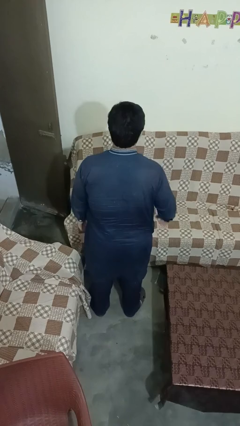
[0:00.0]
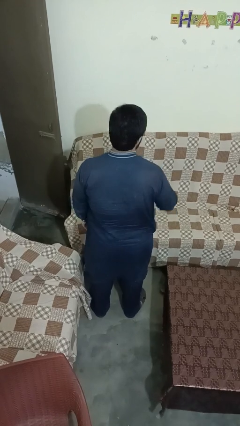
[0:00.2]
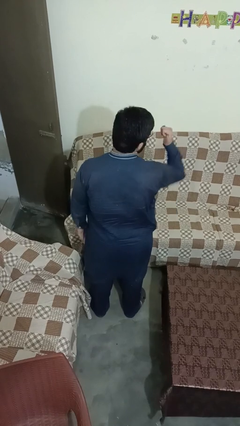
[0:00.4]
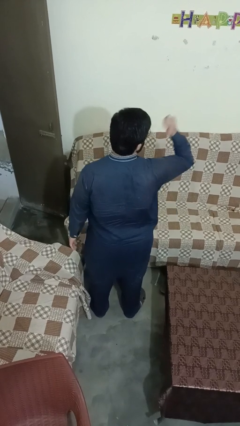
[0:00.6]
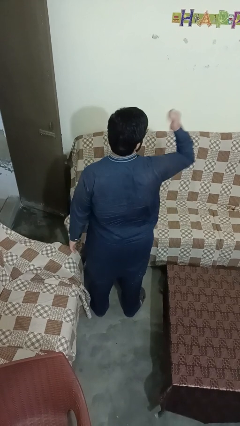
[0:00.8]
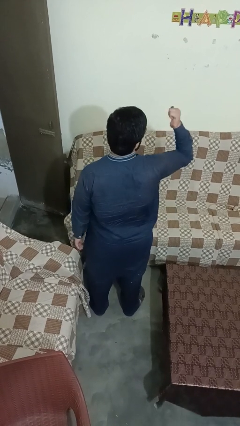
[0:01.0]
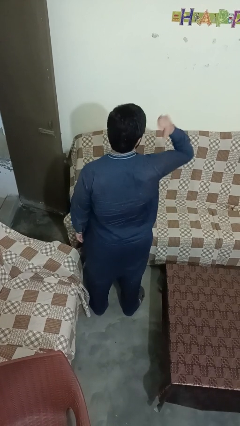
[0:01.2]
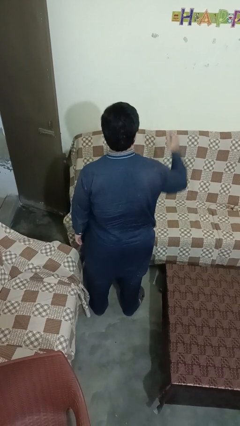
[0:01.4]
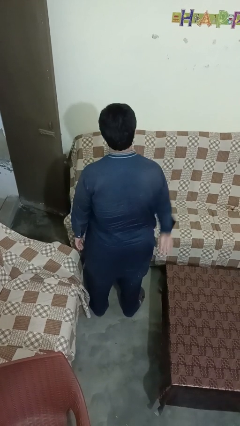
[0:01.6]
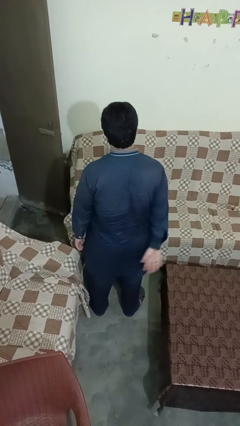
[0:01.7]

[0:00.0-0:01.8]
person gestures behind me

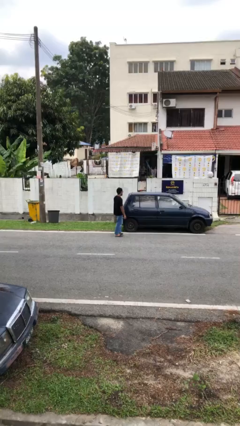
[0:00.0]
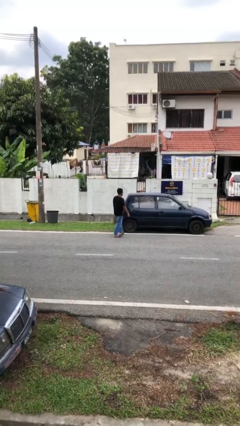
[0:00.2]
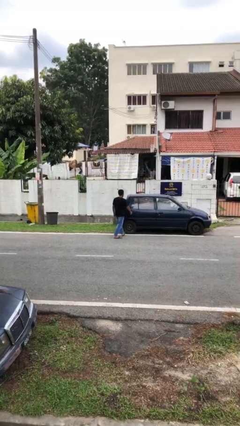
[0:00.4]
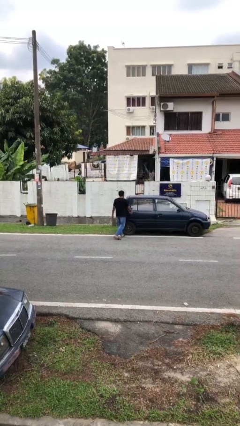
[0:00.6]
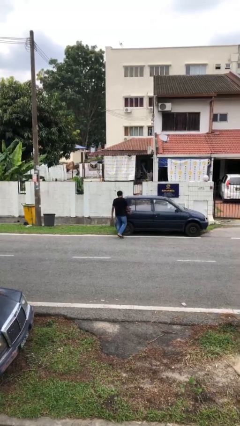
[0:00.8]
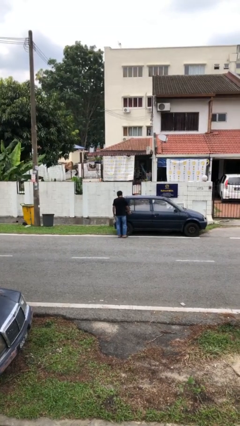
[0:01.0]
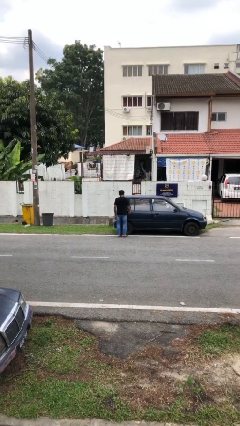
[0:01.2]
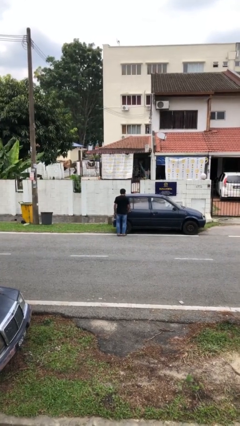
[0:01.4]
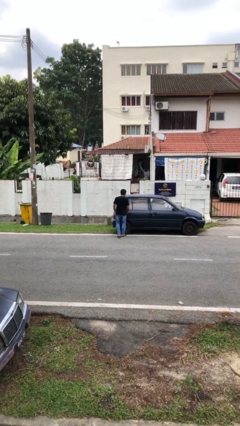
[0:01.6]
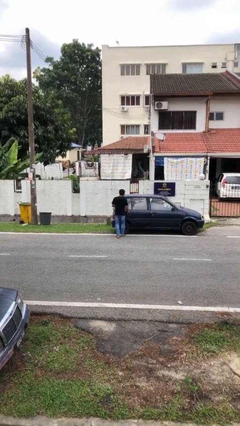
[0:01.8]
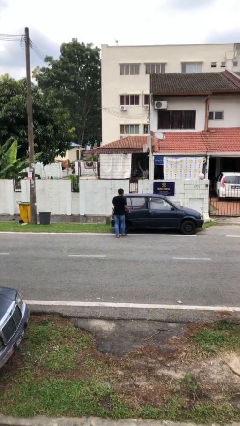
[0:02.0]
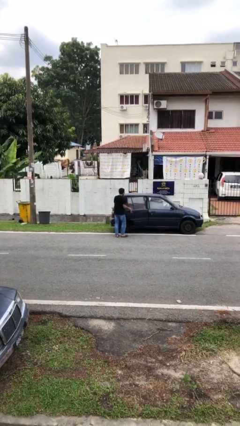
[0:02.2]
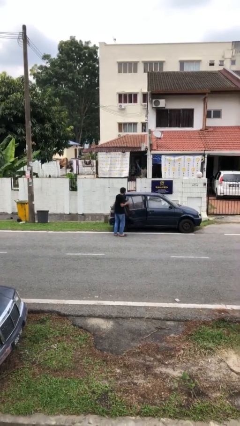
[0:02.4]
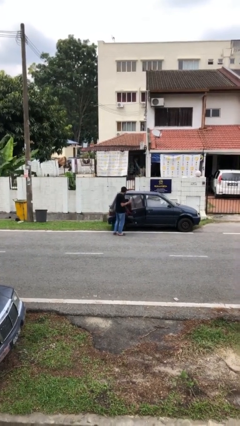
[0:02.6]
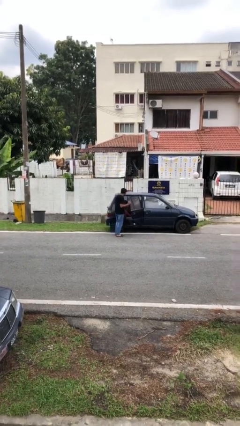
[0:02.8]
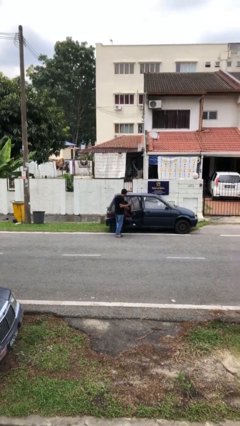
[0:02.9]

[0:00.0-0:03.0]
person opens car door

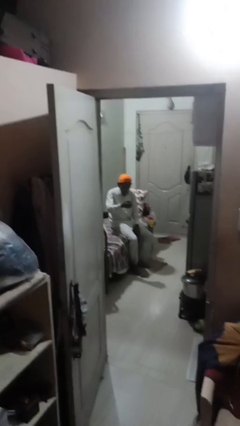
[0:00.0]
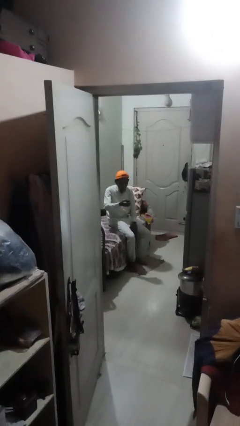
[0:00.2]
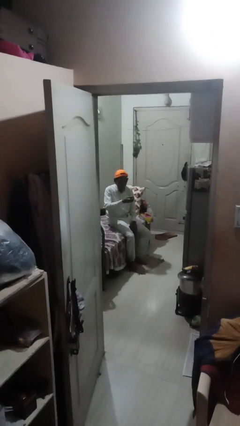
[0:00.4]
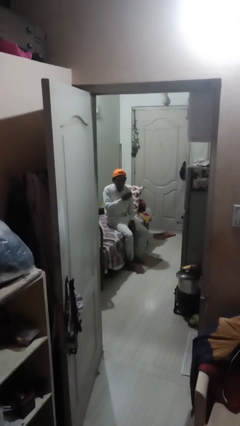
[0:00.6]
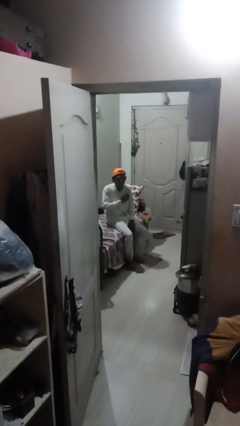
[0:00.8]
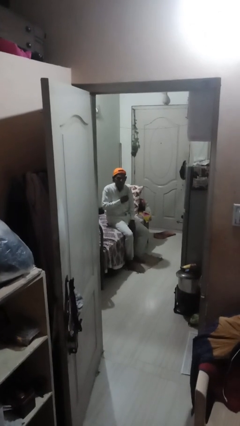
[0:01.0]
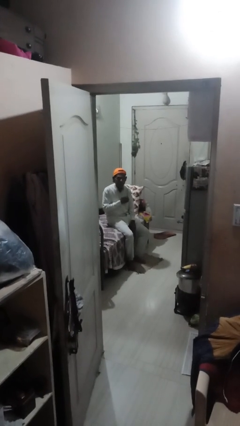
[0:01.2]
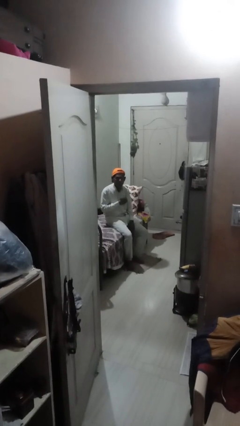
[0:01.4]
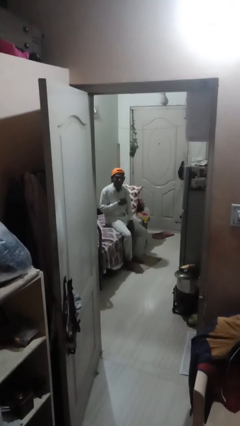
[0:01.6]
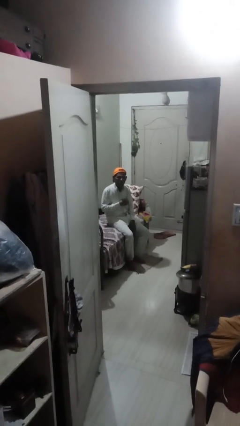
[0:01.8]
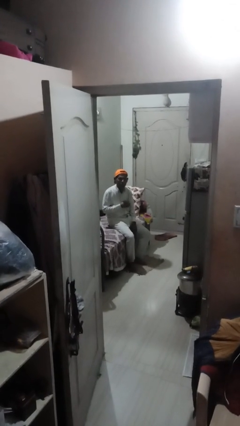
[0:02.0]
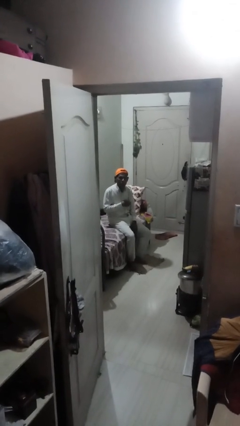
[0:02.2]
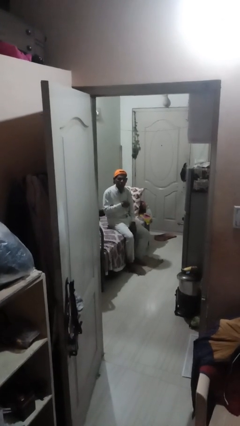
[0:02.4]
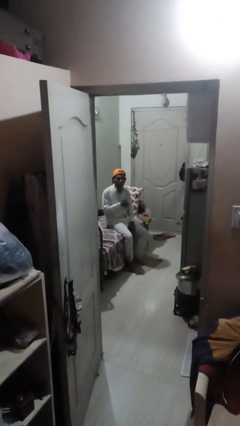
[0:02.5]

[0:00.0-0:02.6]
person puts phone into pocket

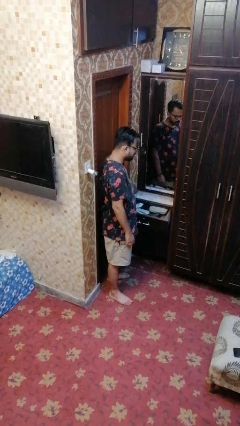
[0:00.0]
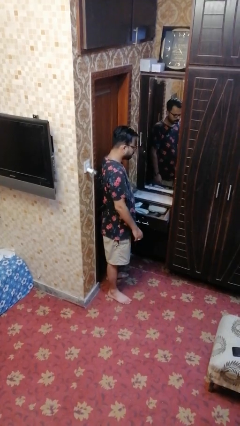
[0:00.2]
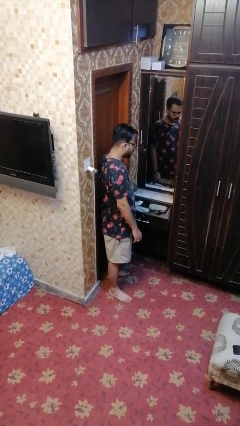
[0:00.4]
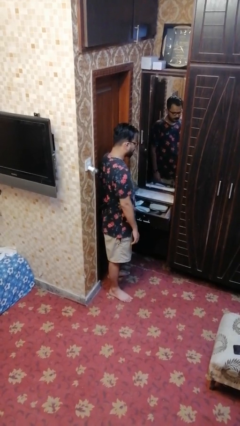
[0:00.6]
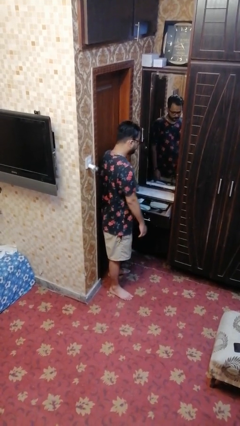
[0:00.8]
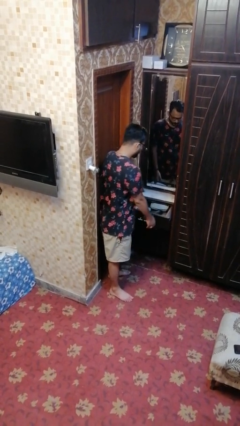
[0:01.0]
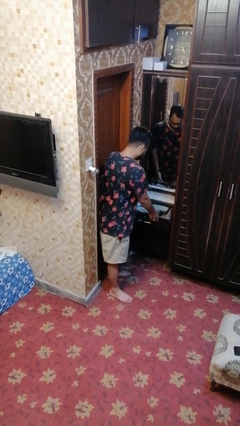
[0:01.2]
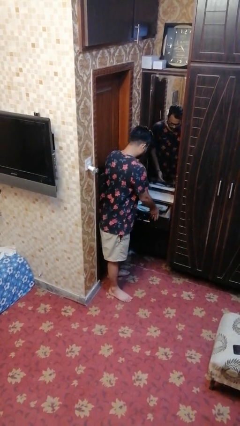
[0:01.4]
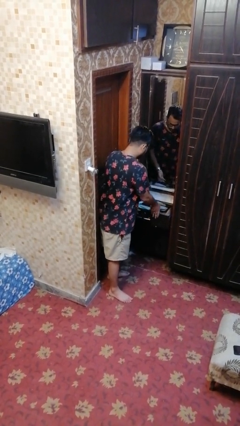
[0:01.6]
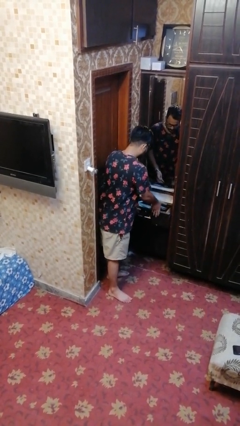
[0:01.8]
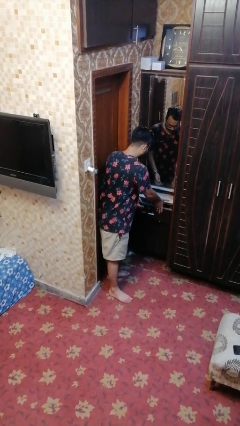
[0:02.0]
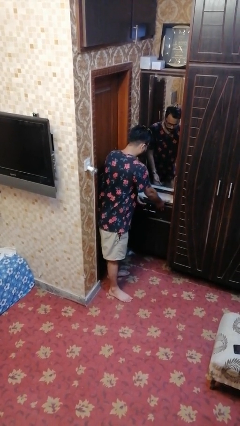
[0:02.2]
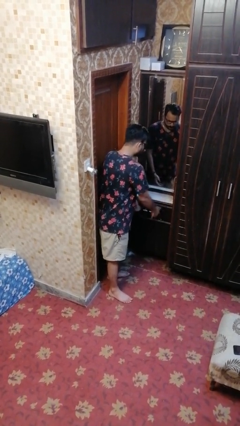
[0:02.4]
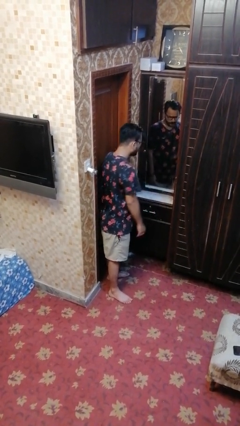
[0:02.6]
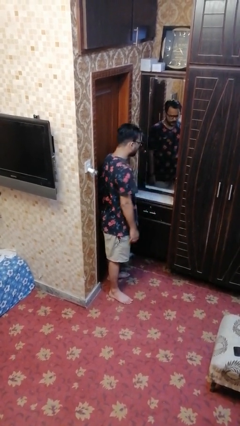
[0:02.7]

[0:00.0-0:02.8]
person closes dresser drawer

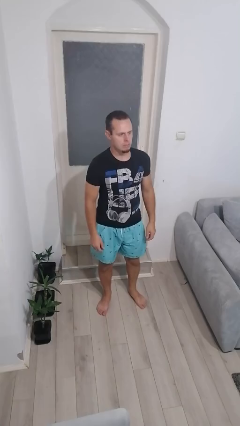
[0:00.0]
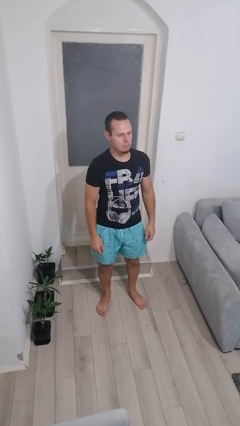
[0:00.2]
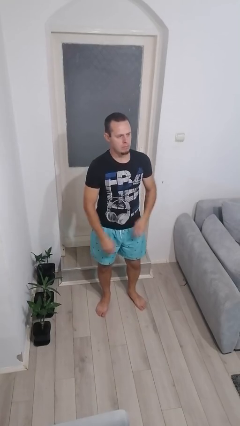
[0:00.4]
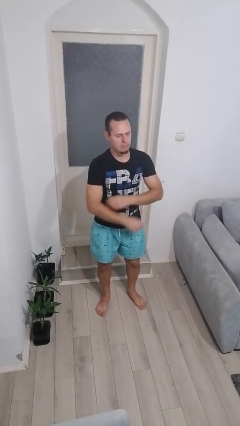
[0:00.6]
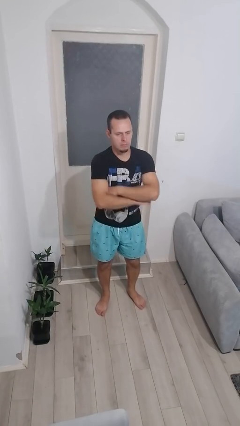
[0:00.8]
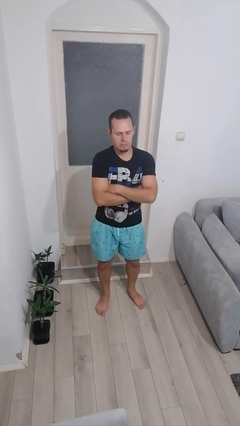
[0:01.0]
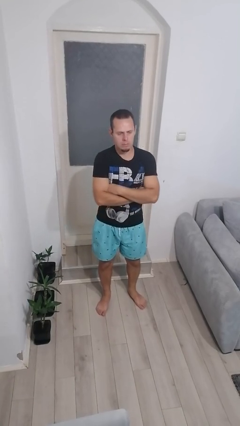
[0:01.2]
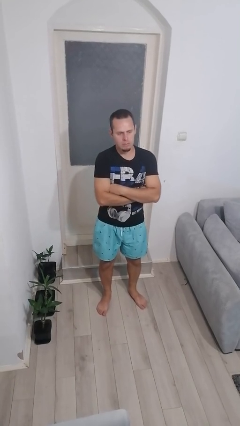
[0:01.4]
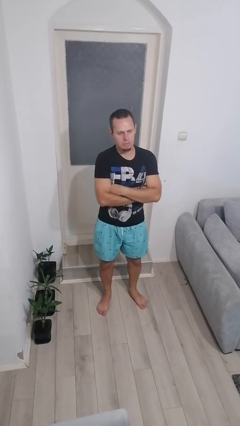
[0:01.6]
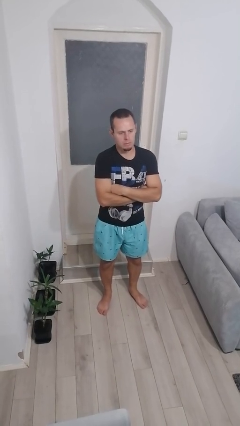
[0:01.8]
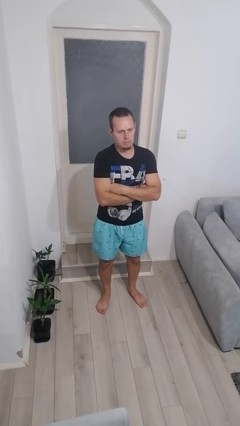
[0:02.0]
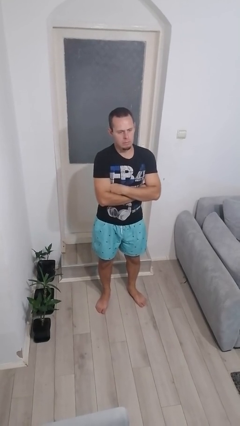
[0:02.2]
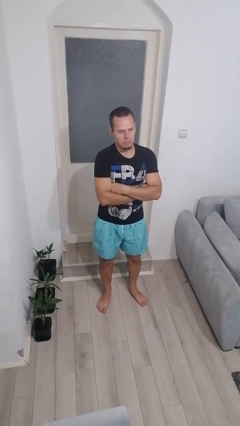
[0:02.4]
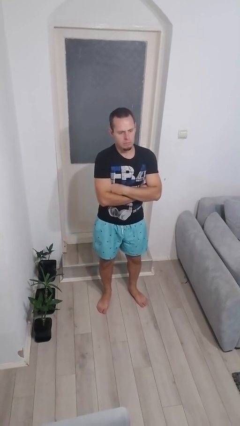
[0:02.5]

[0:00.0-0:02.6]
person crosses arms

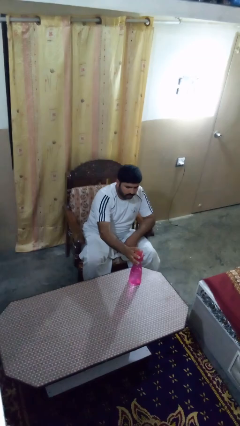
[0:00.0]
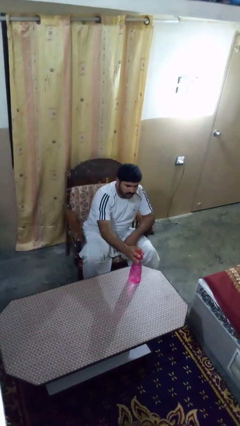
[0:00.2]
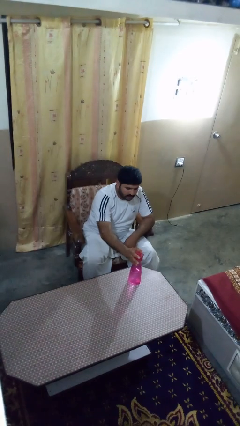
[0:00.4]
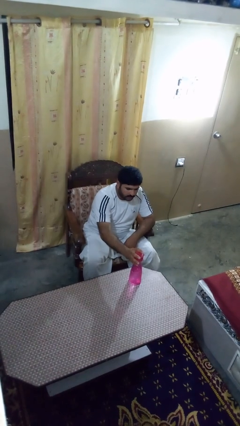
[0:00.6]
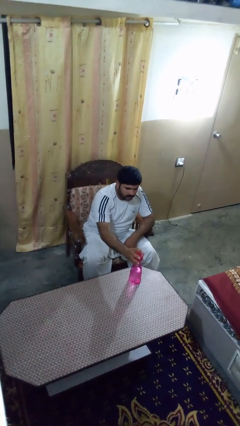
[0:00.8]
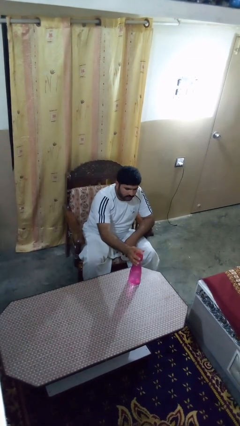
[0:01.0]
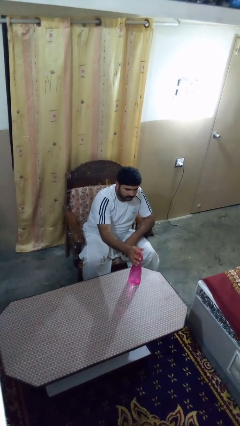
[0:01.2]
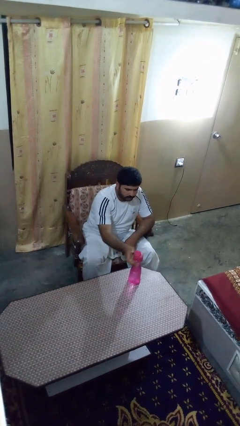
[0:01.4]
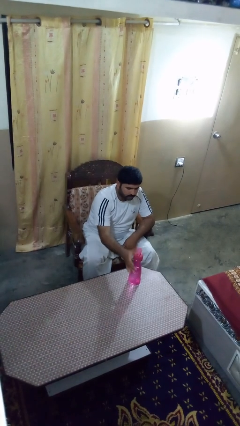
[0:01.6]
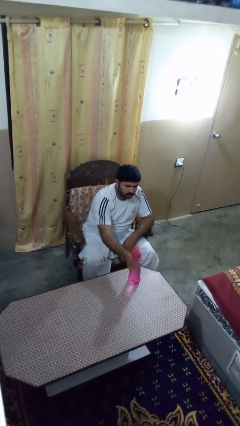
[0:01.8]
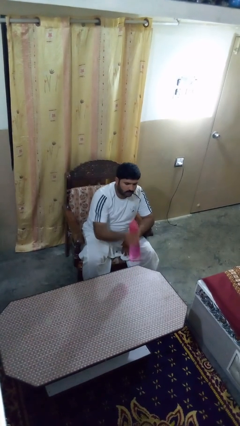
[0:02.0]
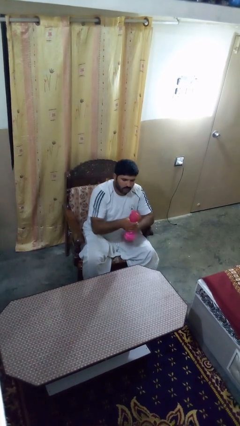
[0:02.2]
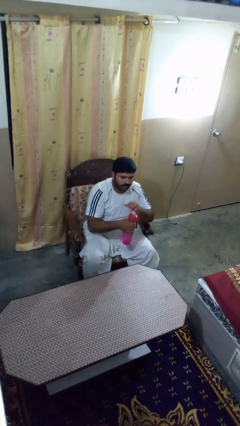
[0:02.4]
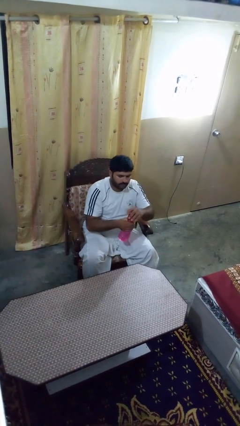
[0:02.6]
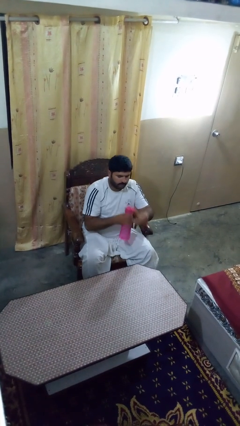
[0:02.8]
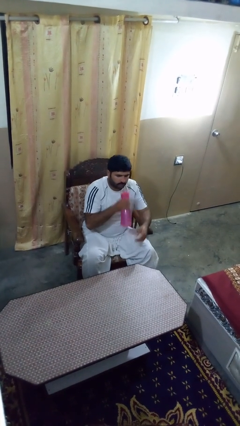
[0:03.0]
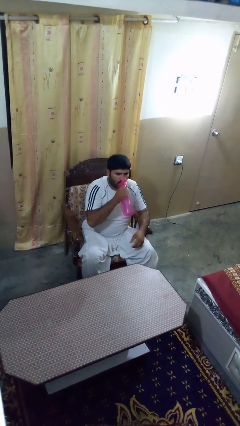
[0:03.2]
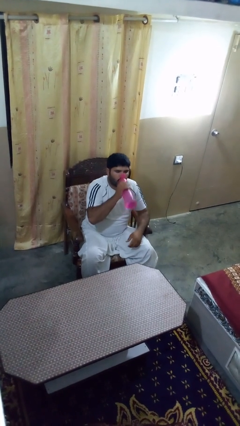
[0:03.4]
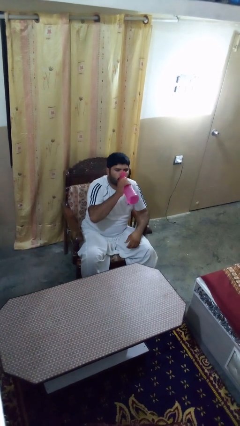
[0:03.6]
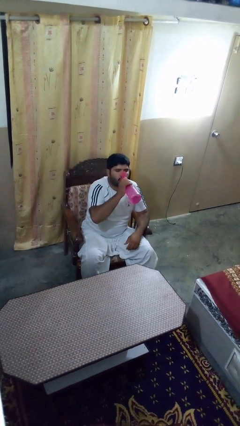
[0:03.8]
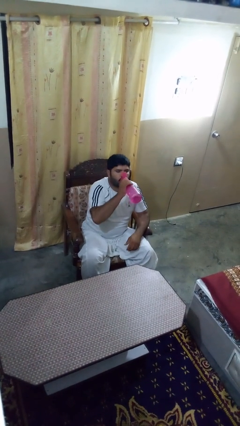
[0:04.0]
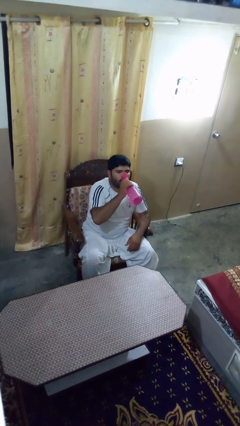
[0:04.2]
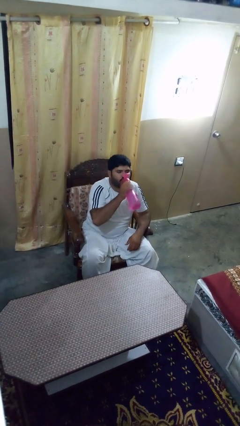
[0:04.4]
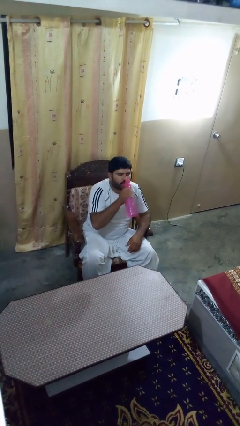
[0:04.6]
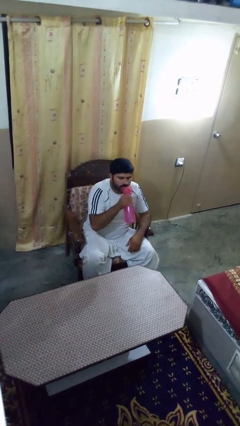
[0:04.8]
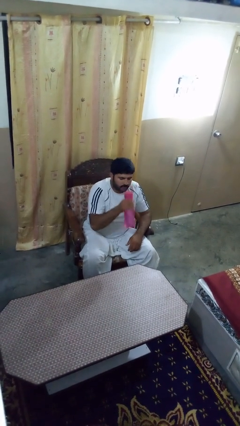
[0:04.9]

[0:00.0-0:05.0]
person drinks from bottle
